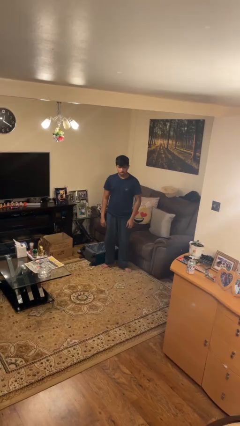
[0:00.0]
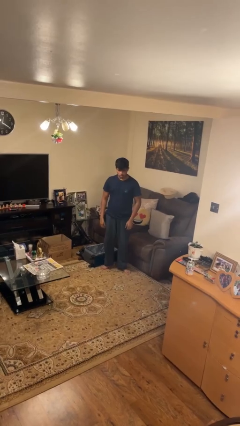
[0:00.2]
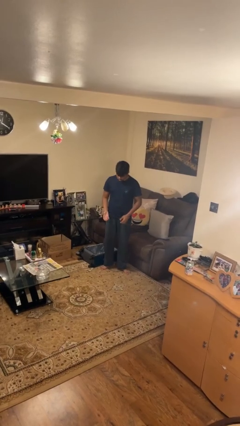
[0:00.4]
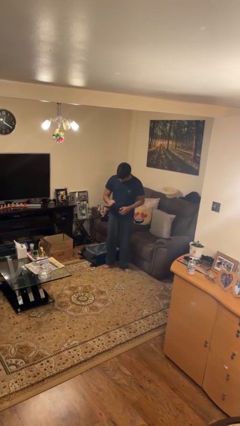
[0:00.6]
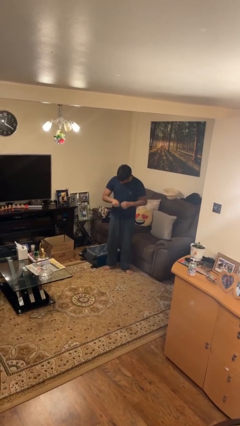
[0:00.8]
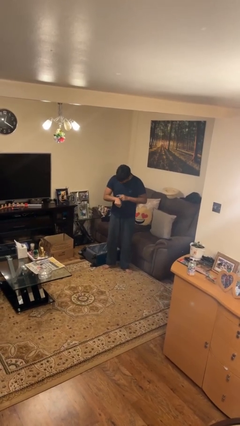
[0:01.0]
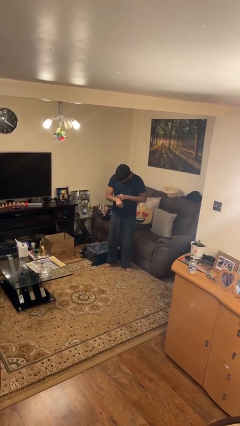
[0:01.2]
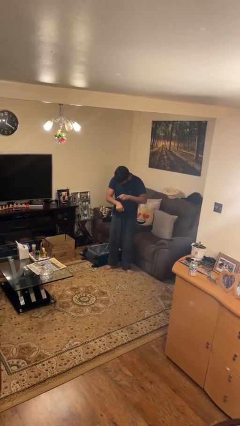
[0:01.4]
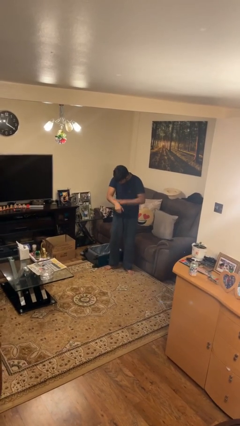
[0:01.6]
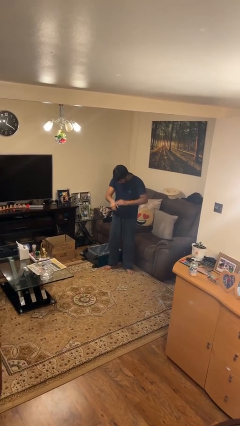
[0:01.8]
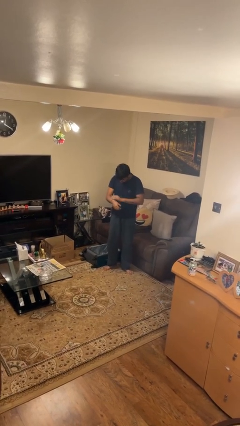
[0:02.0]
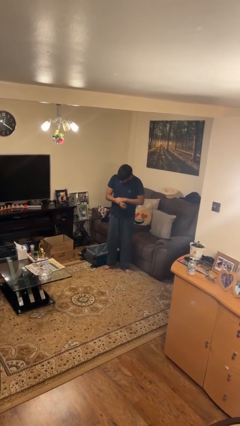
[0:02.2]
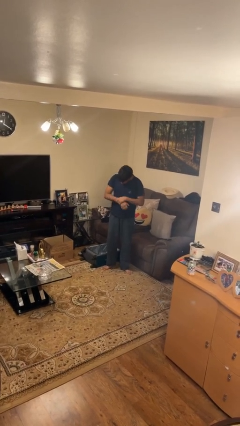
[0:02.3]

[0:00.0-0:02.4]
person swats bug

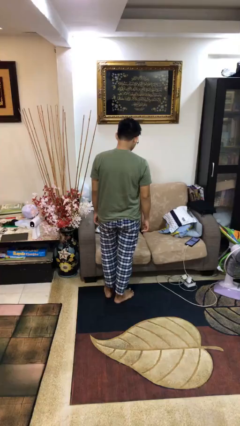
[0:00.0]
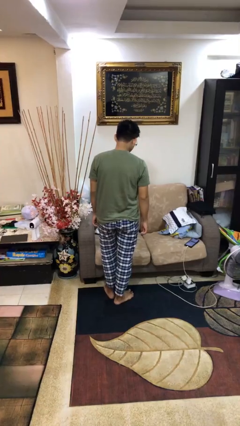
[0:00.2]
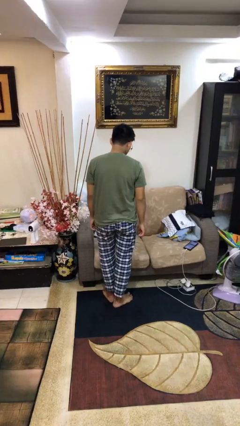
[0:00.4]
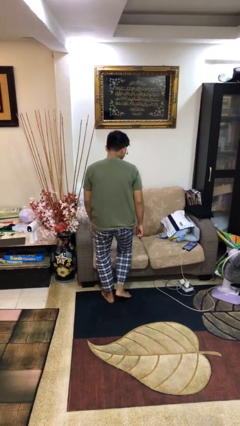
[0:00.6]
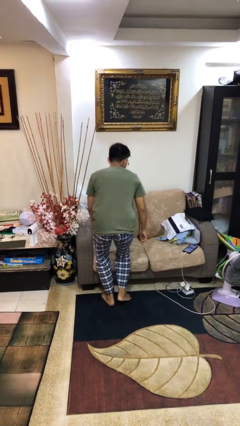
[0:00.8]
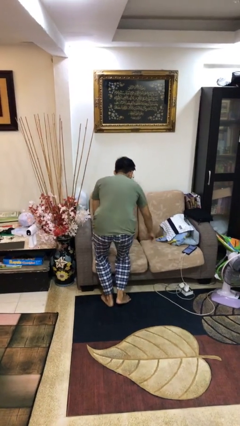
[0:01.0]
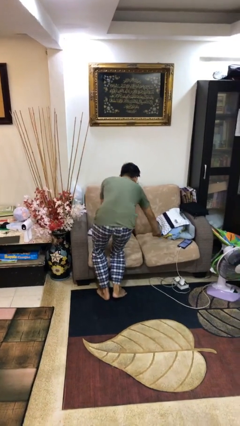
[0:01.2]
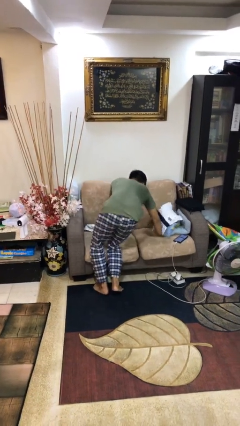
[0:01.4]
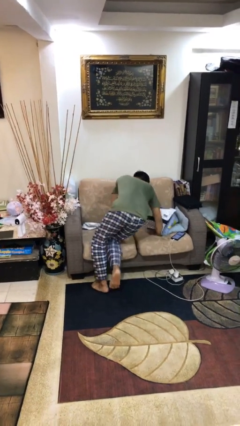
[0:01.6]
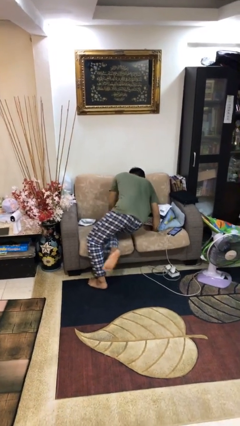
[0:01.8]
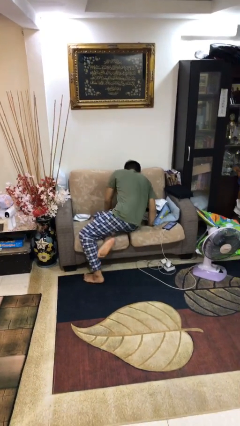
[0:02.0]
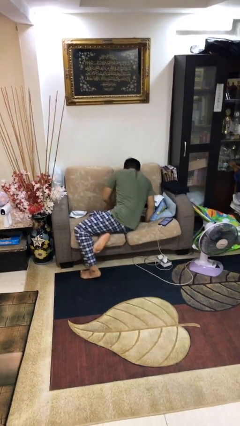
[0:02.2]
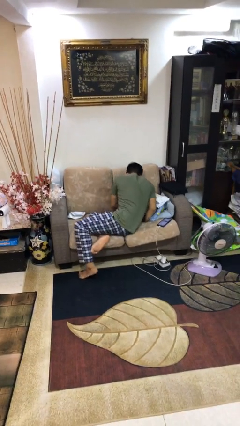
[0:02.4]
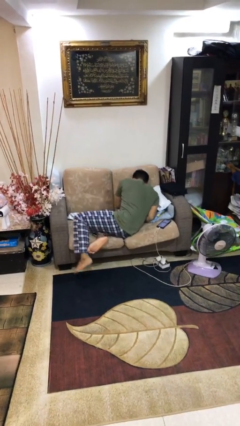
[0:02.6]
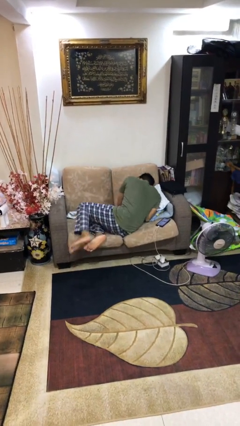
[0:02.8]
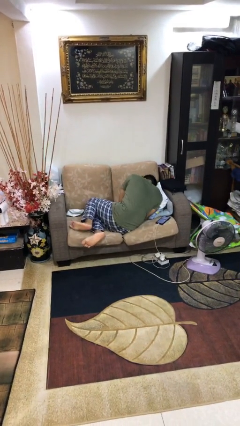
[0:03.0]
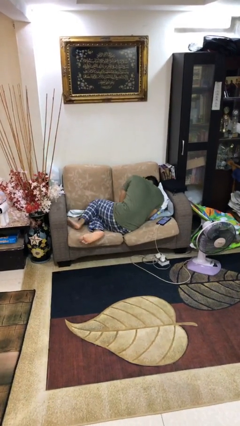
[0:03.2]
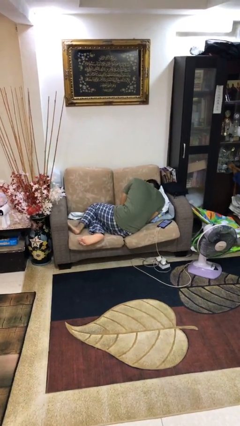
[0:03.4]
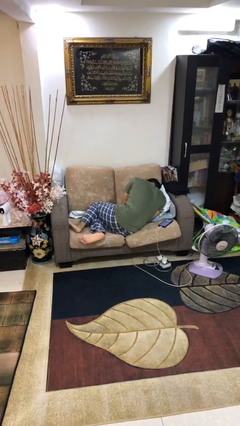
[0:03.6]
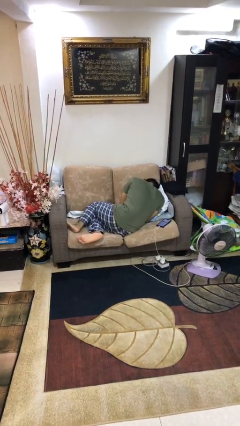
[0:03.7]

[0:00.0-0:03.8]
person lies down on couch

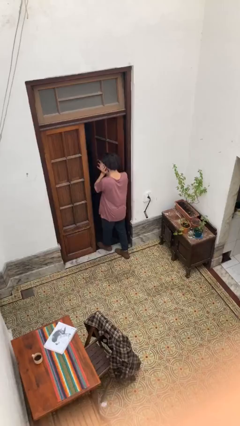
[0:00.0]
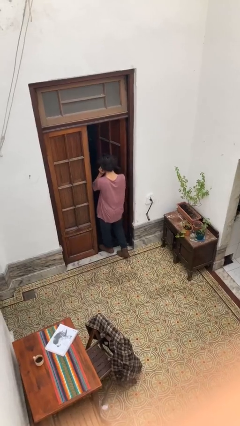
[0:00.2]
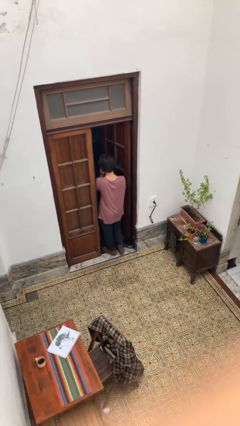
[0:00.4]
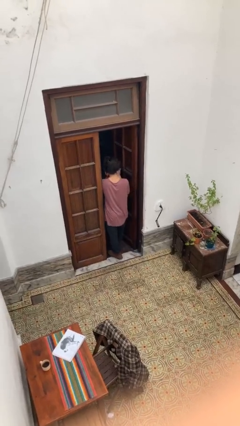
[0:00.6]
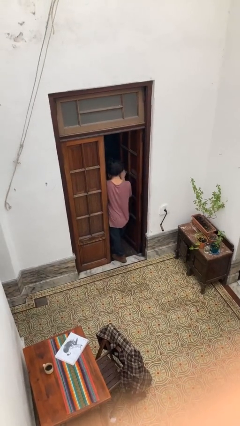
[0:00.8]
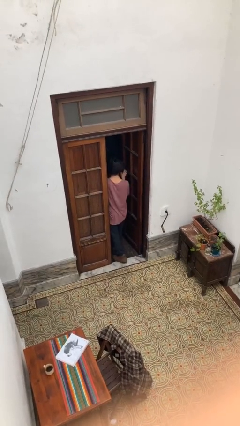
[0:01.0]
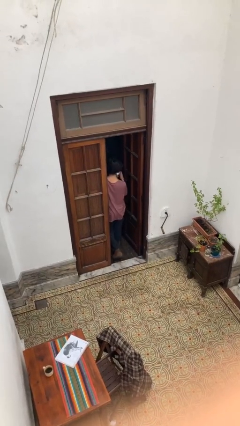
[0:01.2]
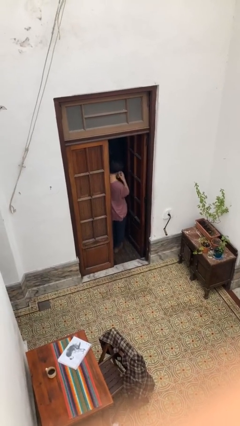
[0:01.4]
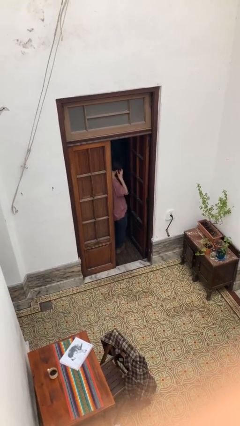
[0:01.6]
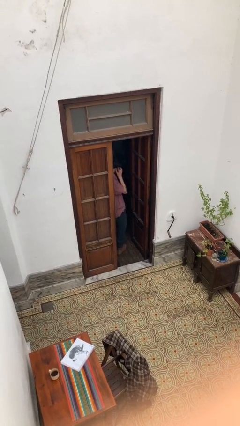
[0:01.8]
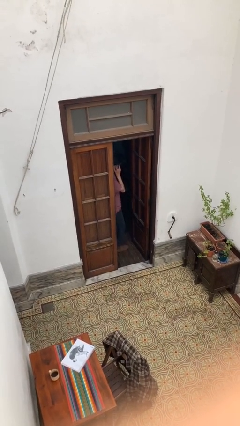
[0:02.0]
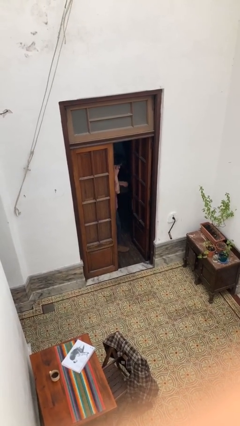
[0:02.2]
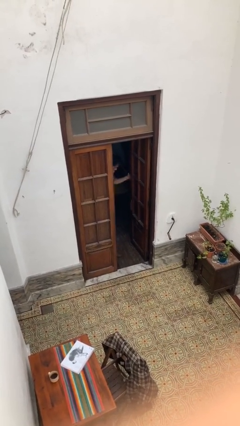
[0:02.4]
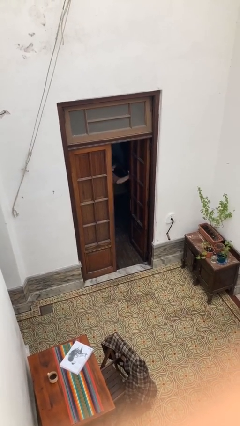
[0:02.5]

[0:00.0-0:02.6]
person exits scene through structure

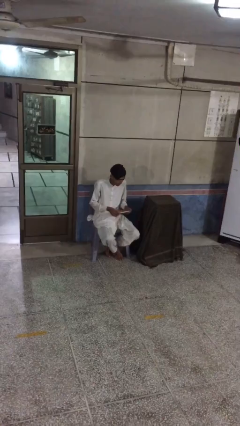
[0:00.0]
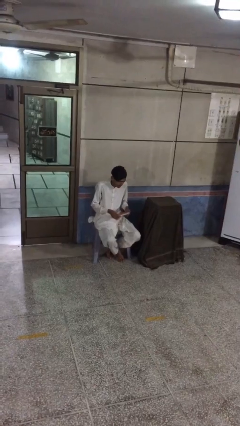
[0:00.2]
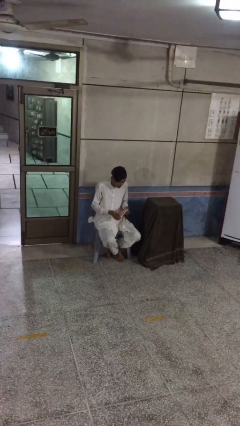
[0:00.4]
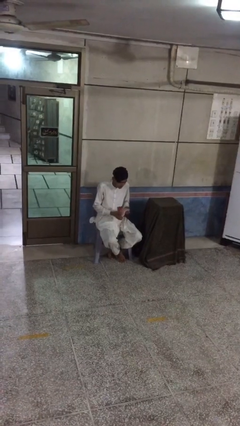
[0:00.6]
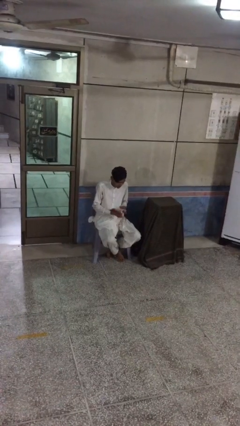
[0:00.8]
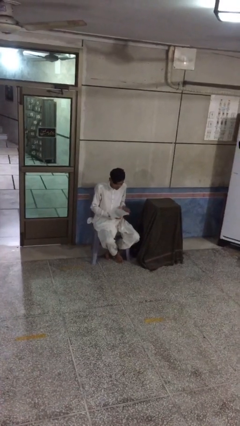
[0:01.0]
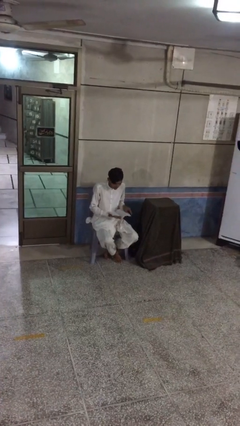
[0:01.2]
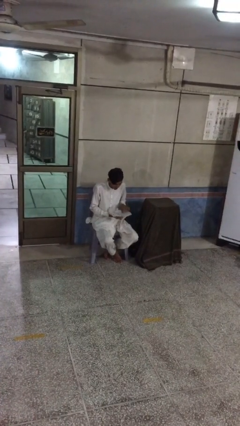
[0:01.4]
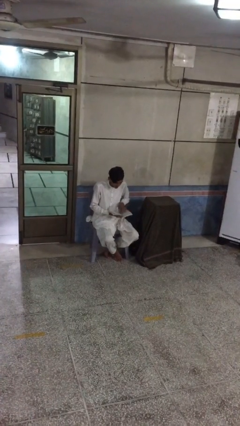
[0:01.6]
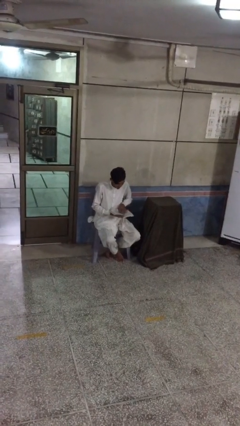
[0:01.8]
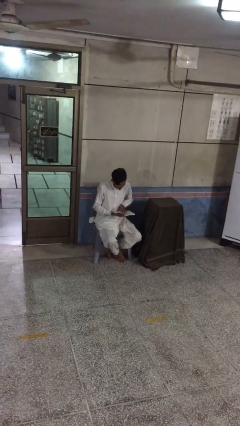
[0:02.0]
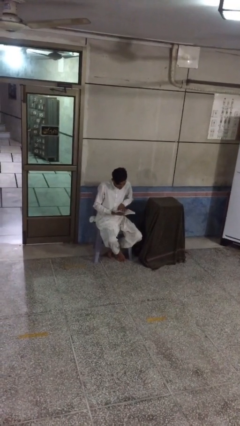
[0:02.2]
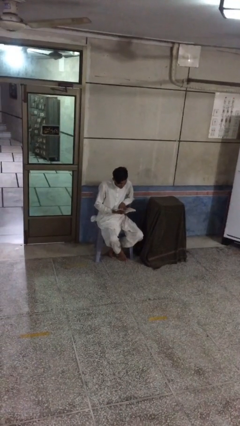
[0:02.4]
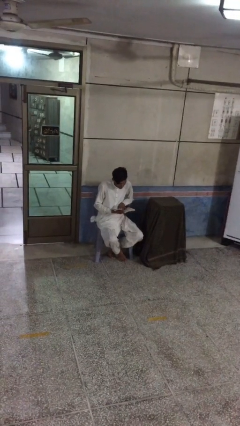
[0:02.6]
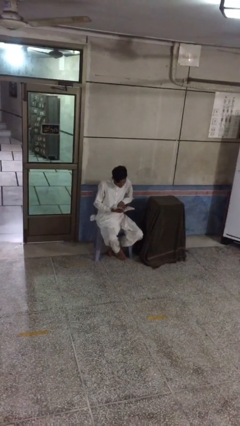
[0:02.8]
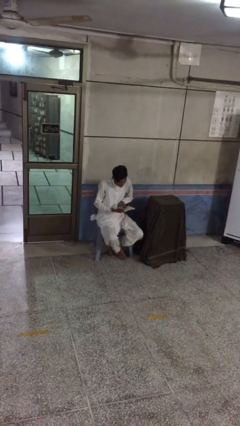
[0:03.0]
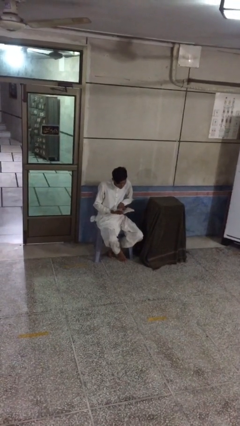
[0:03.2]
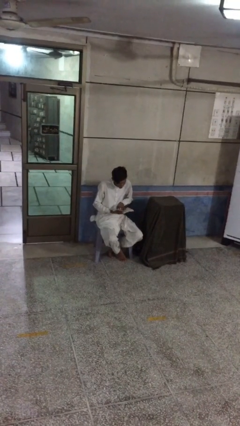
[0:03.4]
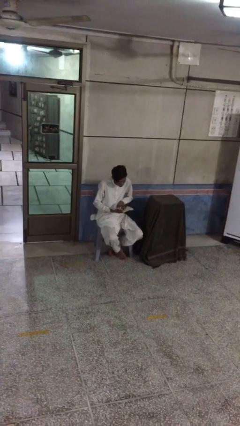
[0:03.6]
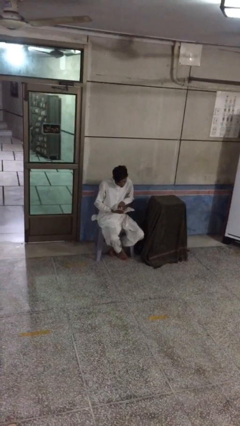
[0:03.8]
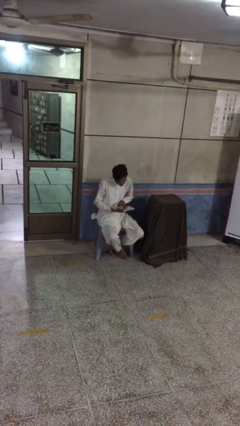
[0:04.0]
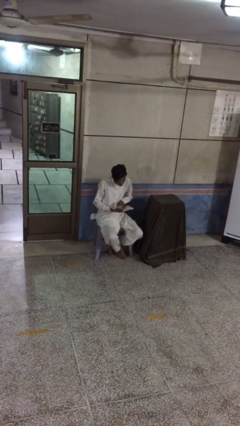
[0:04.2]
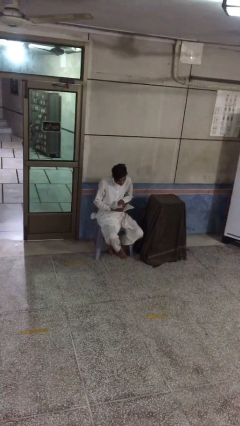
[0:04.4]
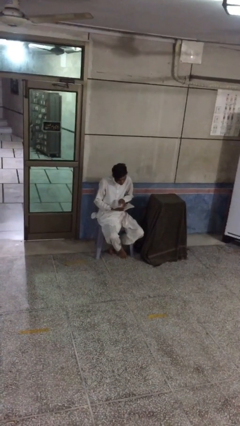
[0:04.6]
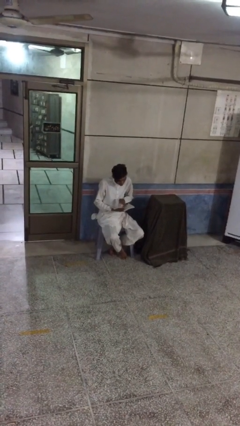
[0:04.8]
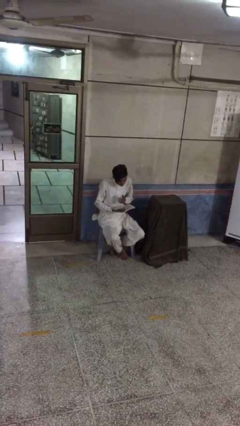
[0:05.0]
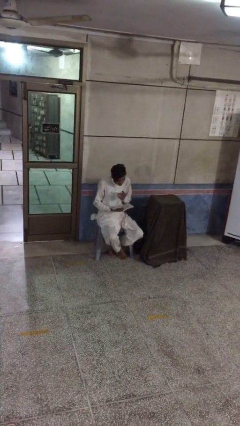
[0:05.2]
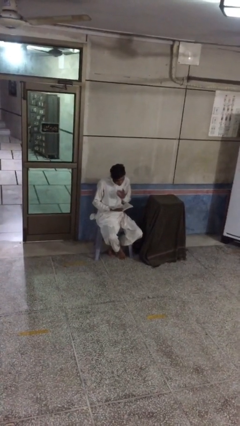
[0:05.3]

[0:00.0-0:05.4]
person reads document

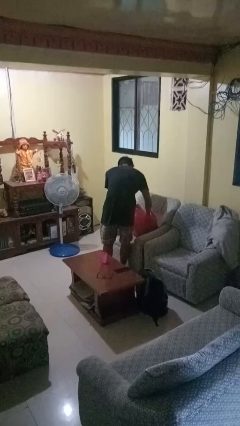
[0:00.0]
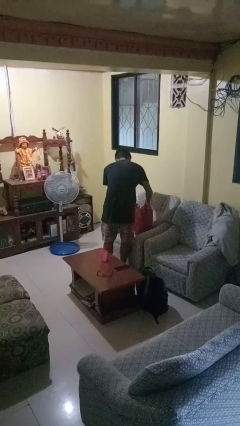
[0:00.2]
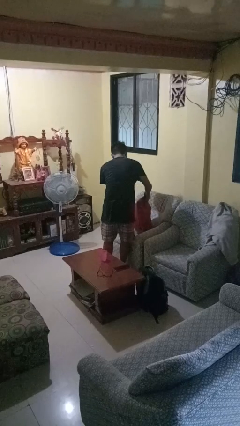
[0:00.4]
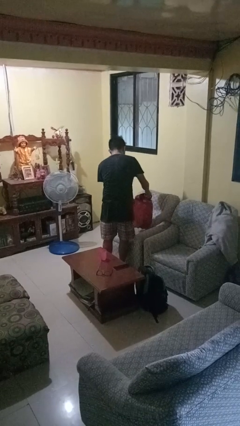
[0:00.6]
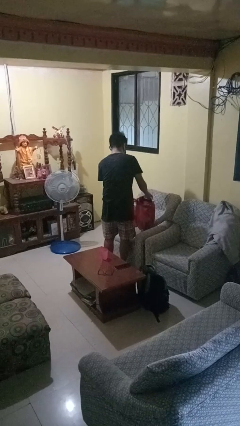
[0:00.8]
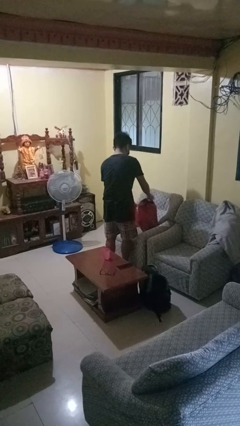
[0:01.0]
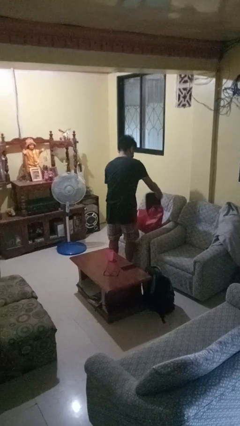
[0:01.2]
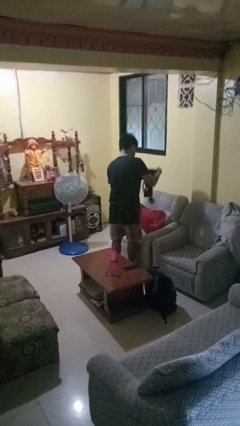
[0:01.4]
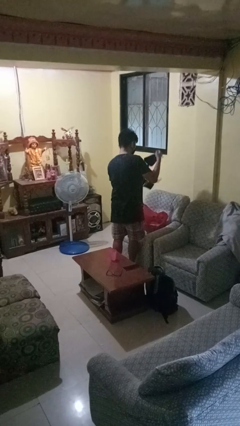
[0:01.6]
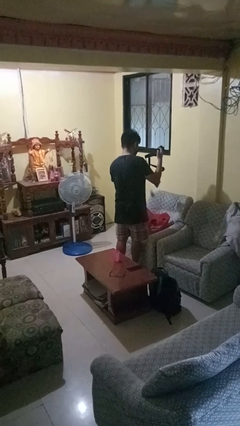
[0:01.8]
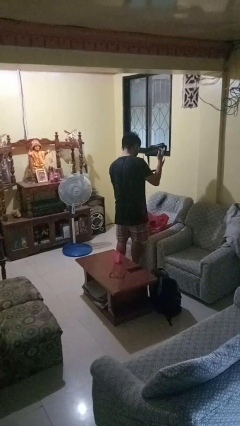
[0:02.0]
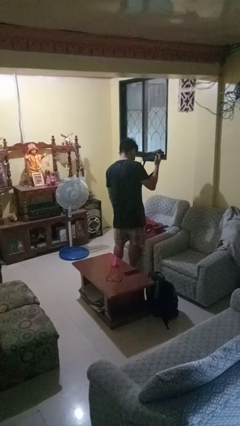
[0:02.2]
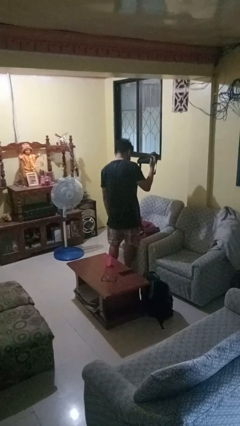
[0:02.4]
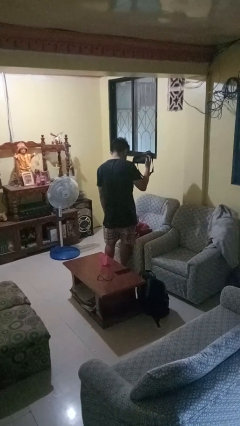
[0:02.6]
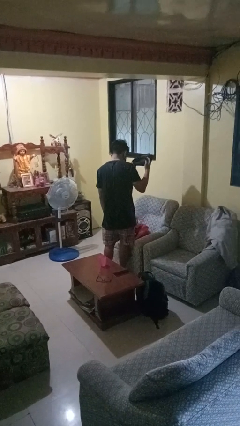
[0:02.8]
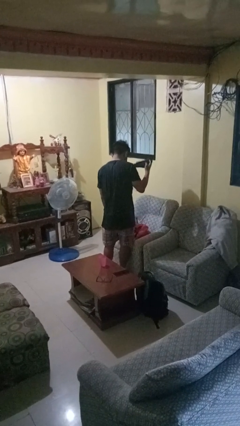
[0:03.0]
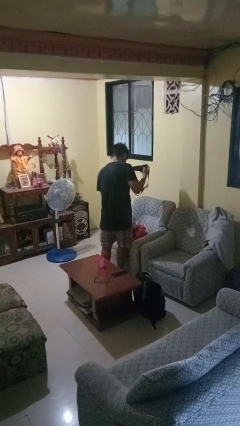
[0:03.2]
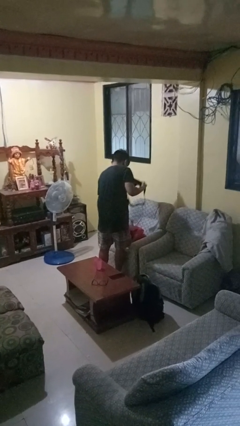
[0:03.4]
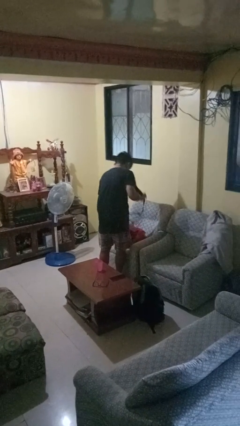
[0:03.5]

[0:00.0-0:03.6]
person takes object from bag
